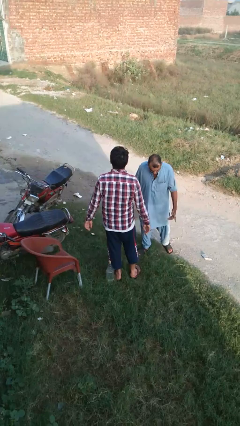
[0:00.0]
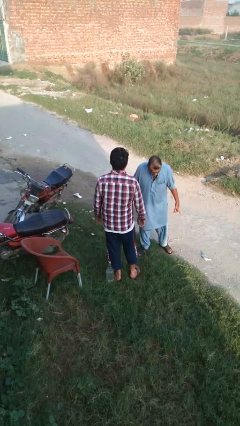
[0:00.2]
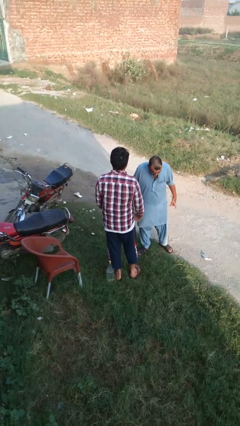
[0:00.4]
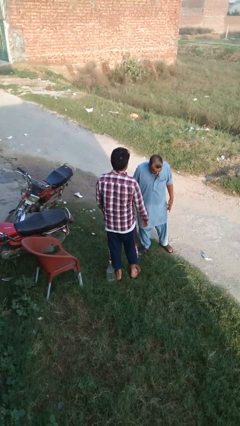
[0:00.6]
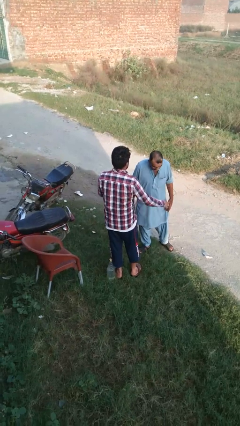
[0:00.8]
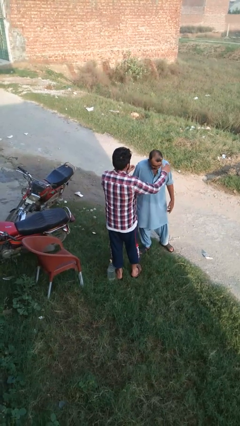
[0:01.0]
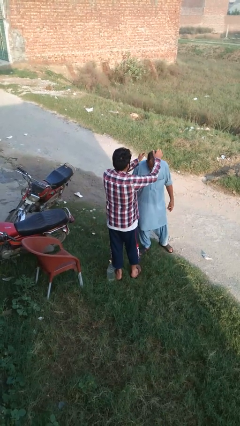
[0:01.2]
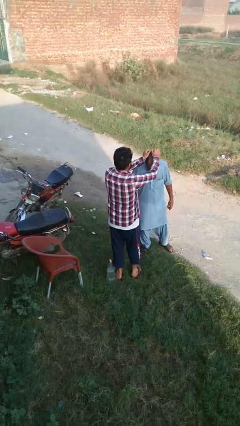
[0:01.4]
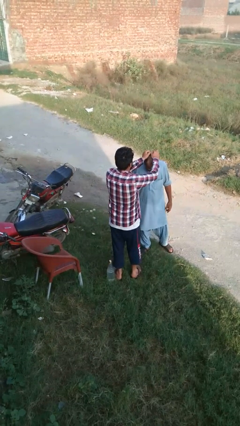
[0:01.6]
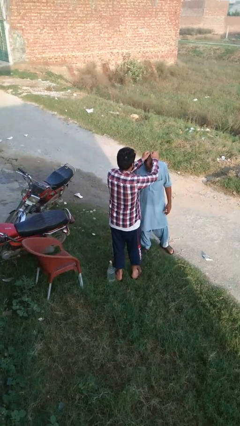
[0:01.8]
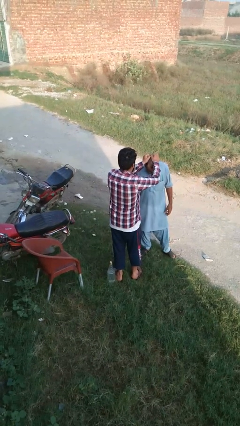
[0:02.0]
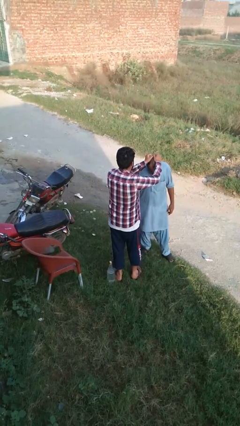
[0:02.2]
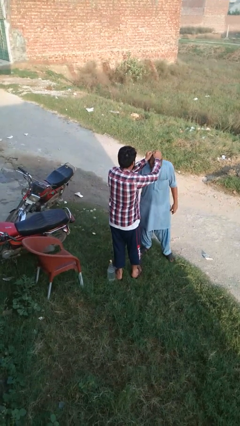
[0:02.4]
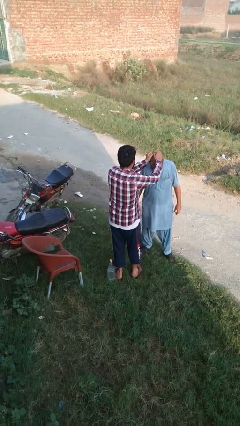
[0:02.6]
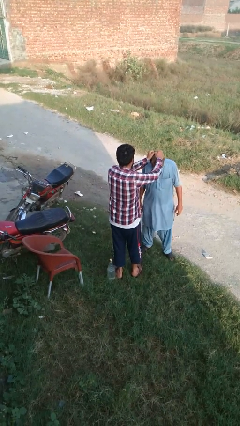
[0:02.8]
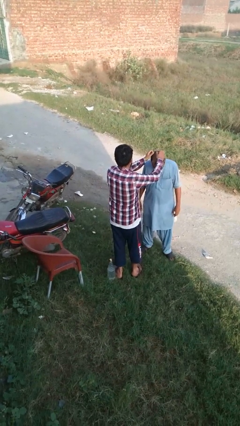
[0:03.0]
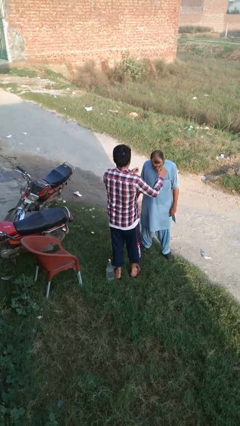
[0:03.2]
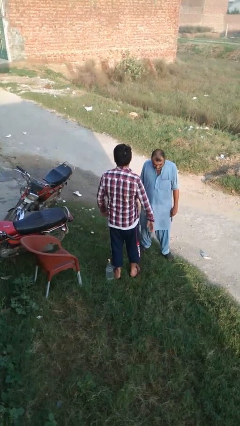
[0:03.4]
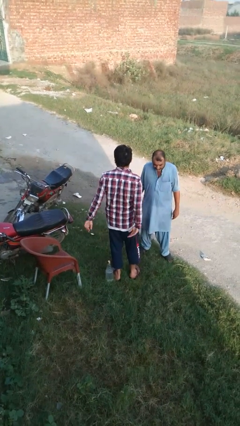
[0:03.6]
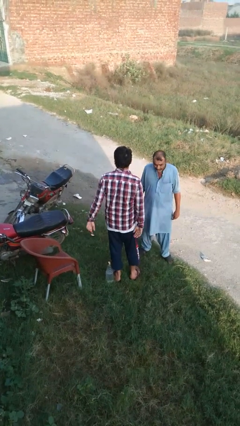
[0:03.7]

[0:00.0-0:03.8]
person grabs person by hair

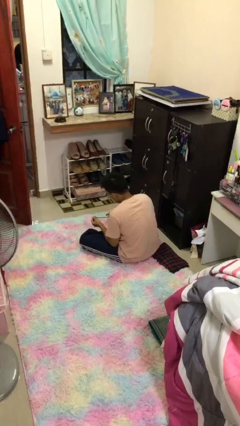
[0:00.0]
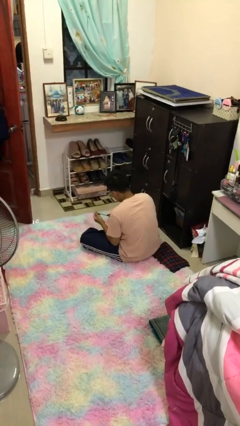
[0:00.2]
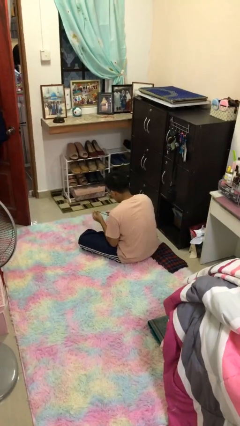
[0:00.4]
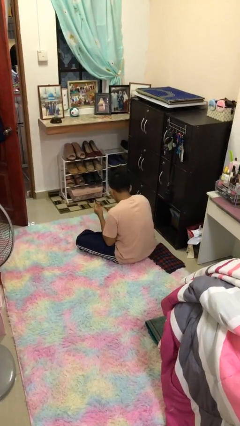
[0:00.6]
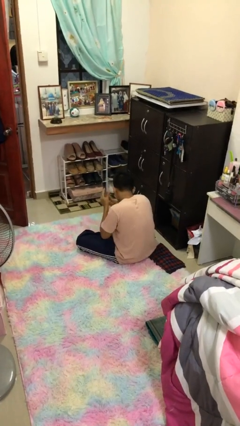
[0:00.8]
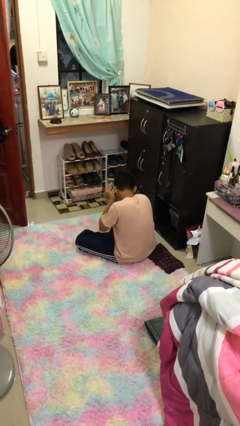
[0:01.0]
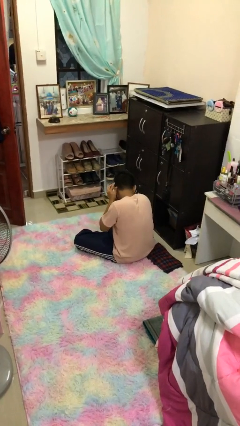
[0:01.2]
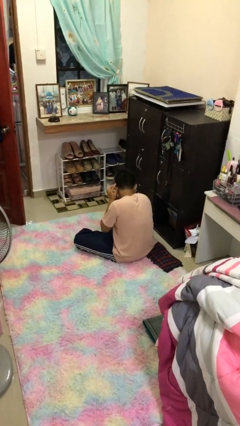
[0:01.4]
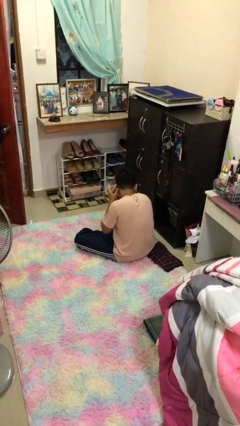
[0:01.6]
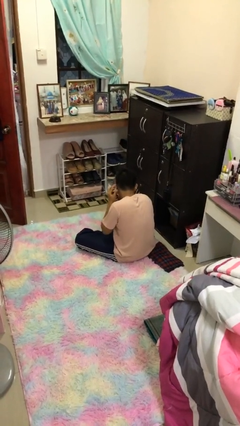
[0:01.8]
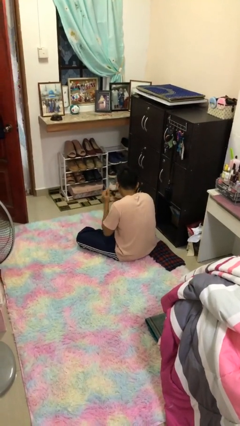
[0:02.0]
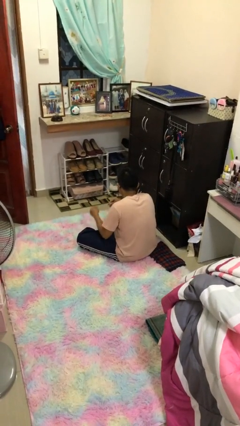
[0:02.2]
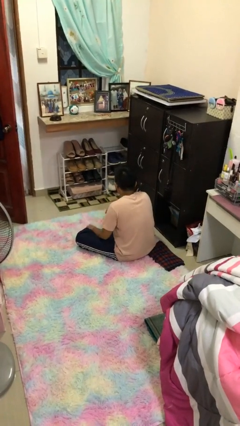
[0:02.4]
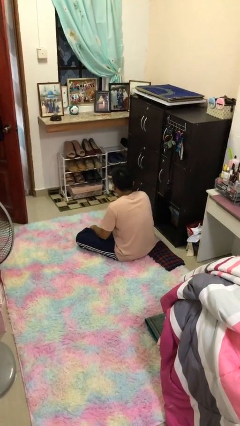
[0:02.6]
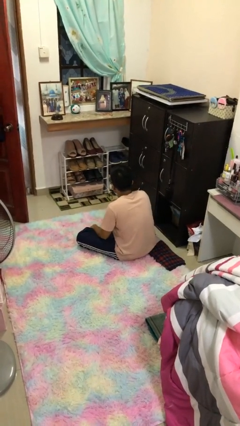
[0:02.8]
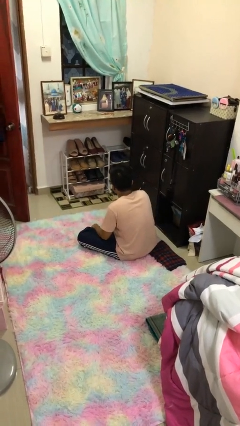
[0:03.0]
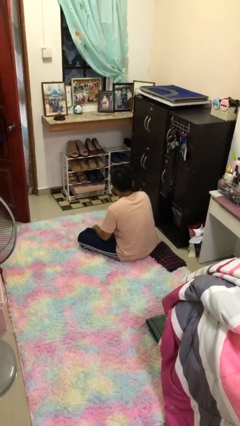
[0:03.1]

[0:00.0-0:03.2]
person puts on earrings

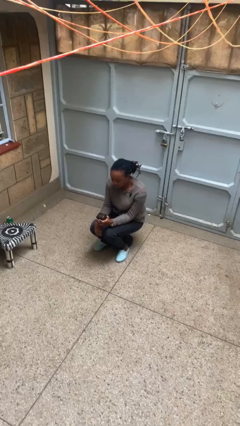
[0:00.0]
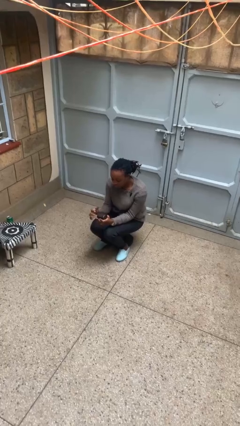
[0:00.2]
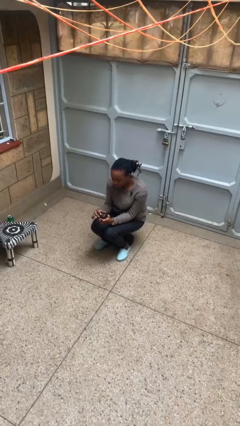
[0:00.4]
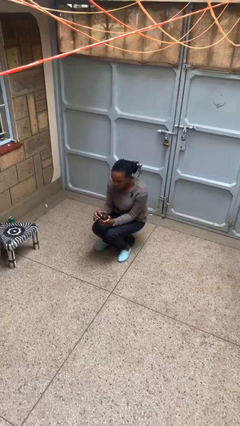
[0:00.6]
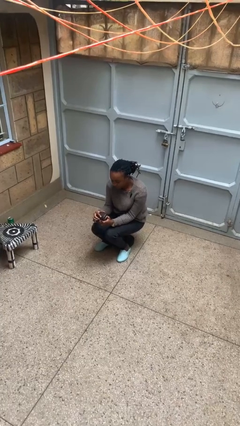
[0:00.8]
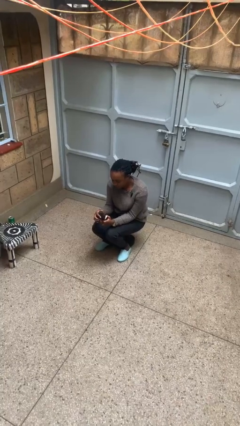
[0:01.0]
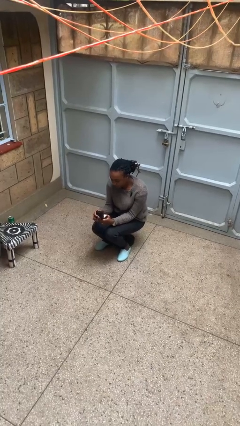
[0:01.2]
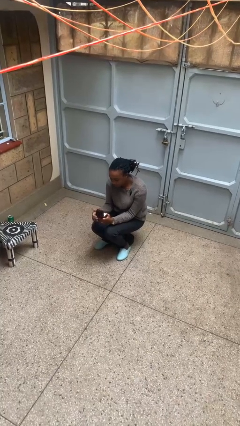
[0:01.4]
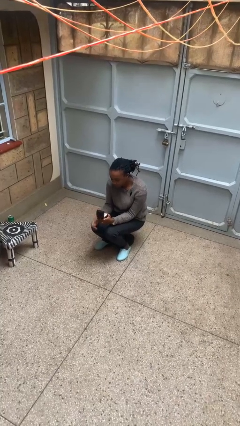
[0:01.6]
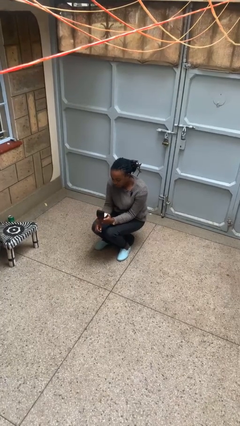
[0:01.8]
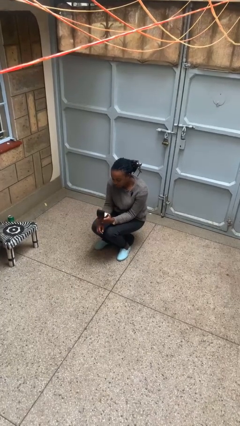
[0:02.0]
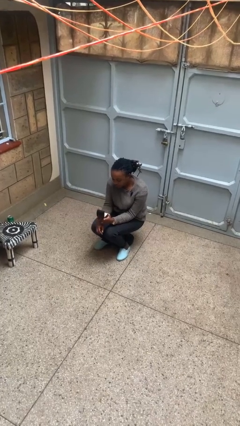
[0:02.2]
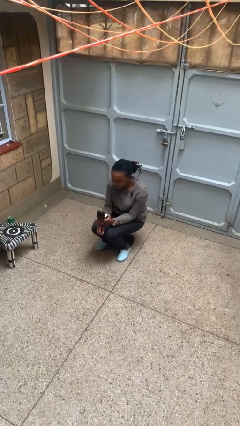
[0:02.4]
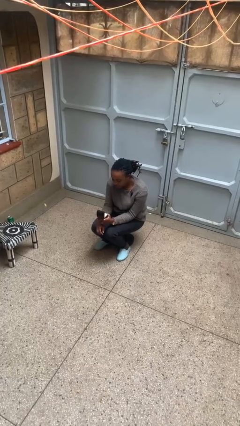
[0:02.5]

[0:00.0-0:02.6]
person opens jewelry box

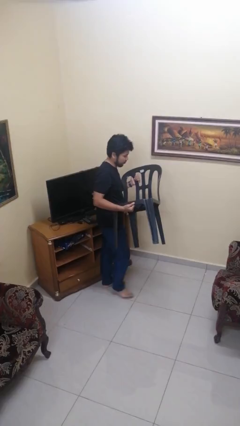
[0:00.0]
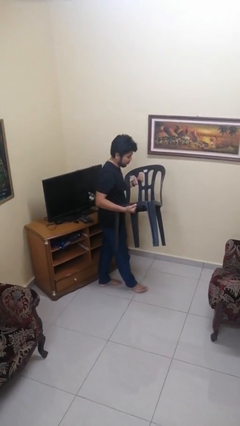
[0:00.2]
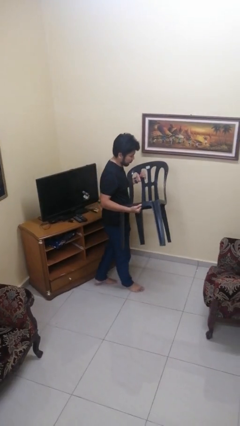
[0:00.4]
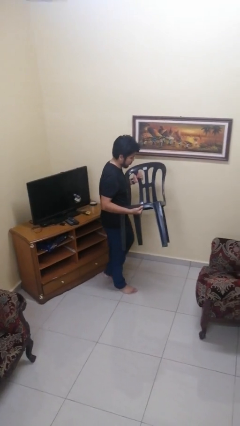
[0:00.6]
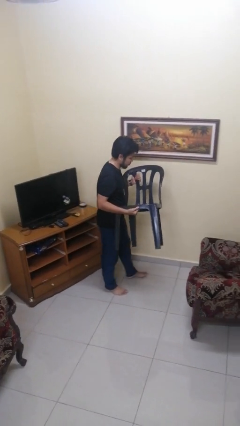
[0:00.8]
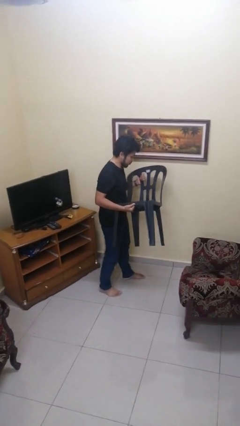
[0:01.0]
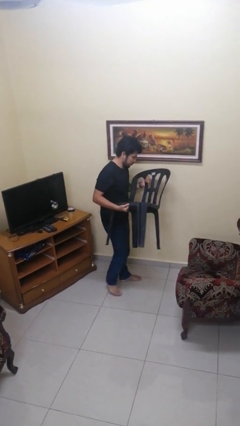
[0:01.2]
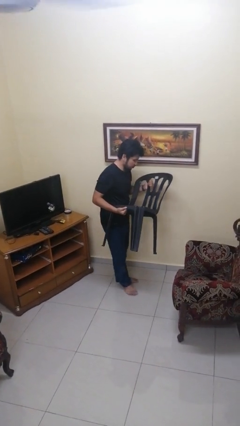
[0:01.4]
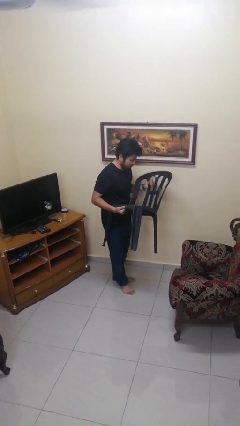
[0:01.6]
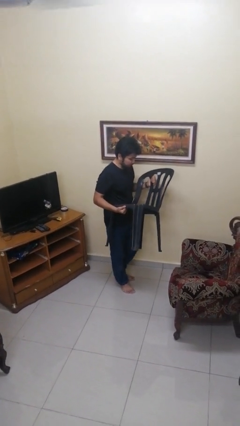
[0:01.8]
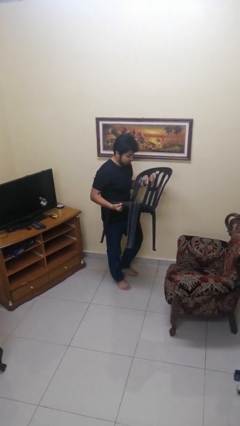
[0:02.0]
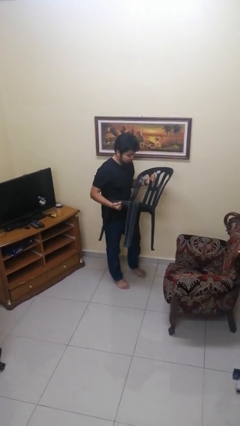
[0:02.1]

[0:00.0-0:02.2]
person carries furniture

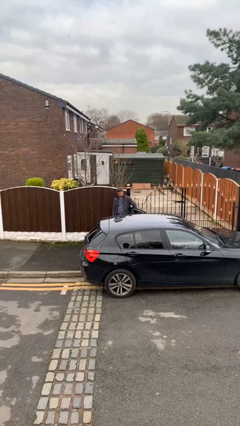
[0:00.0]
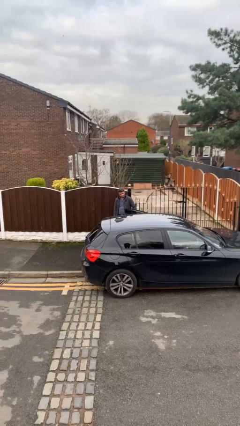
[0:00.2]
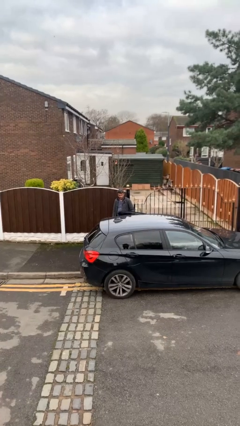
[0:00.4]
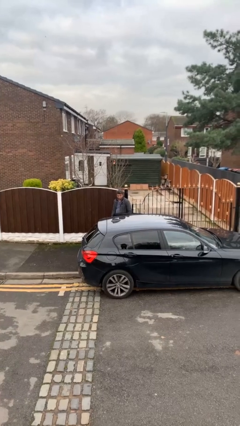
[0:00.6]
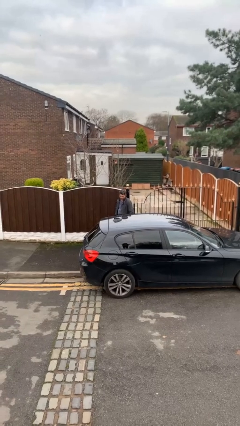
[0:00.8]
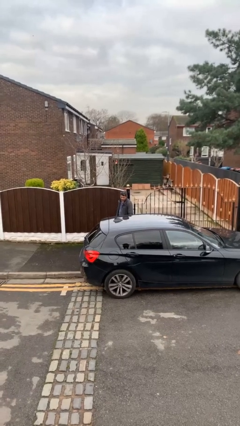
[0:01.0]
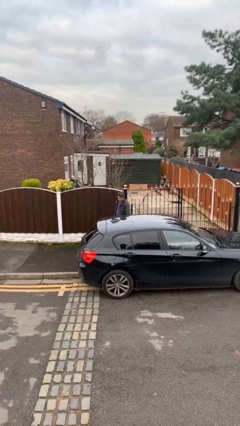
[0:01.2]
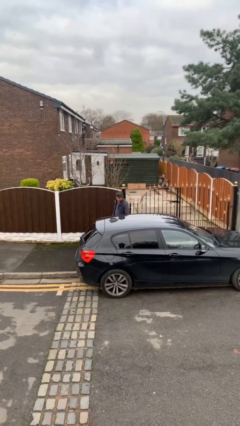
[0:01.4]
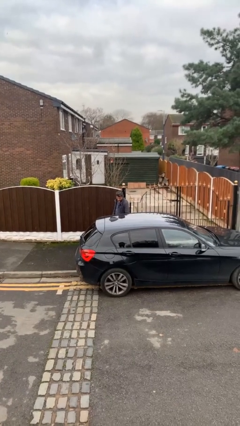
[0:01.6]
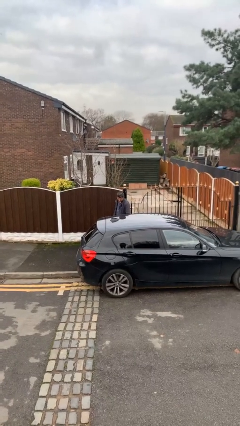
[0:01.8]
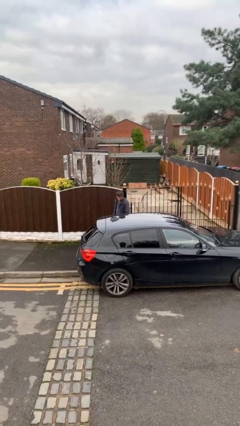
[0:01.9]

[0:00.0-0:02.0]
person closes car door

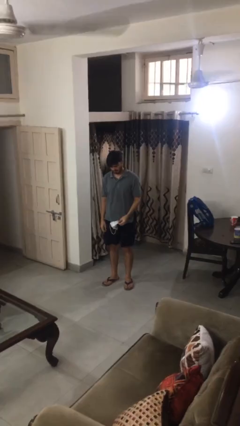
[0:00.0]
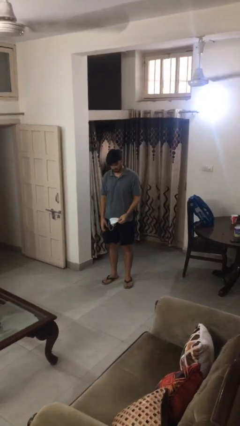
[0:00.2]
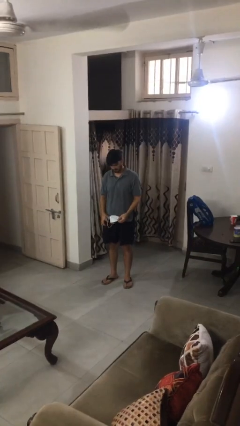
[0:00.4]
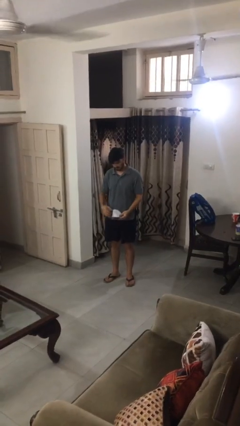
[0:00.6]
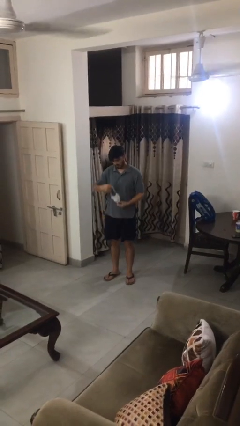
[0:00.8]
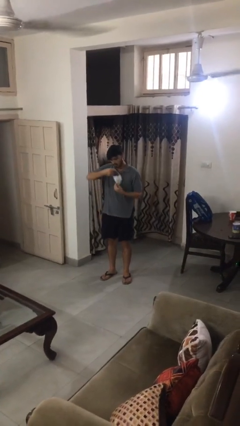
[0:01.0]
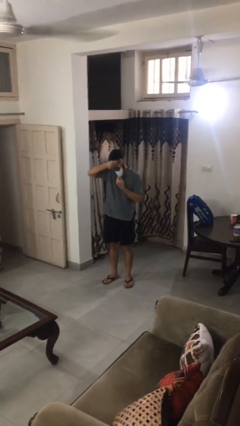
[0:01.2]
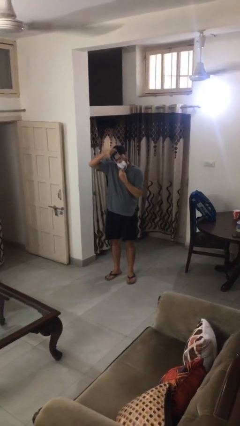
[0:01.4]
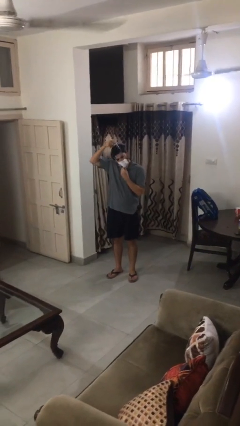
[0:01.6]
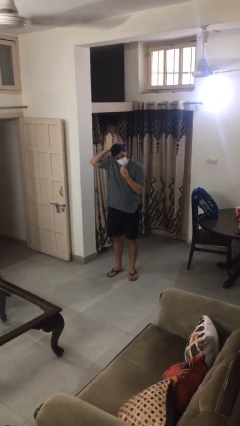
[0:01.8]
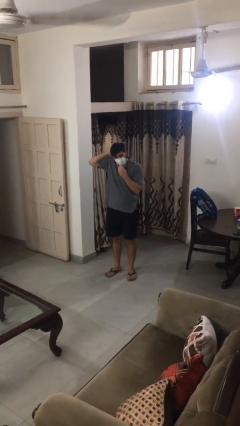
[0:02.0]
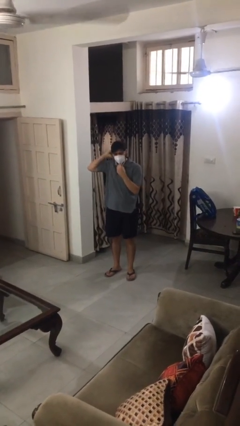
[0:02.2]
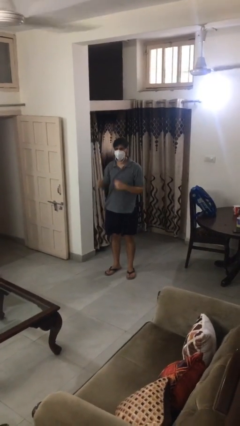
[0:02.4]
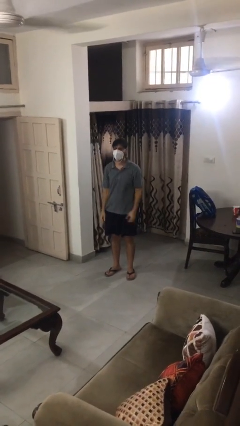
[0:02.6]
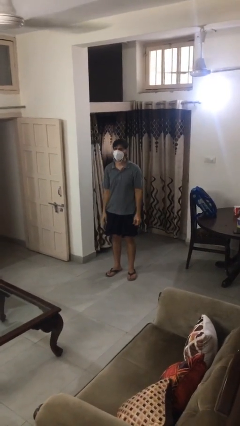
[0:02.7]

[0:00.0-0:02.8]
person puts on facemask

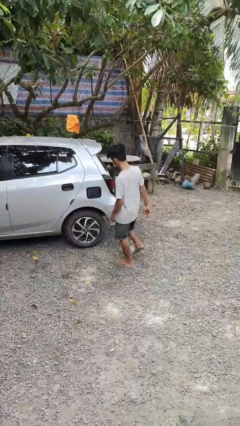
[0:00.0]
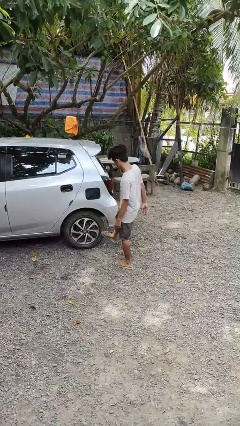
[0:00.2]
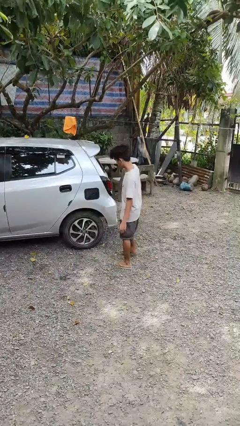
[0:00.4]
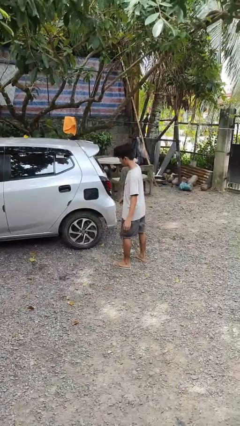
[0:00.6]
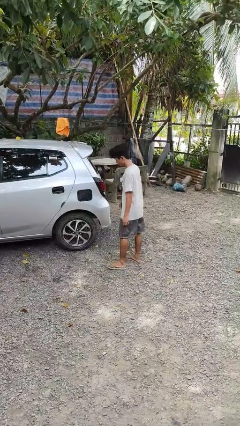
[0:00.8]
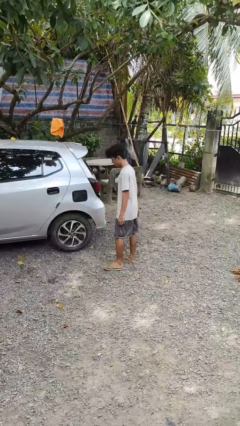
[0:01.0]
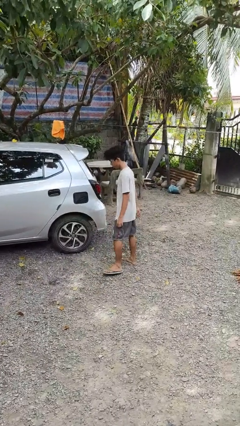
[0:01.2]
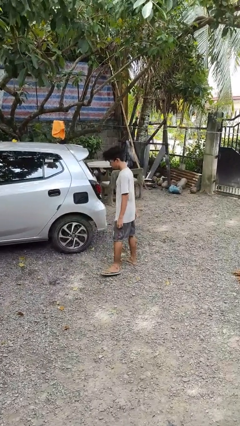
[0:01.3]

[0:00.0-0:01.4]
person kicks car tires
